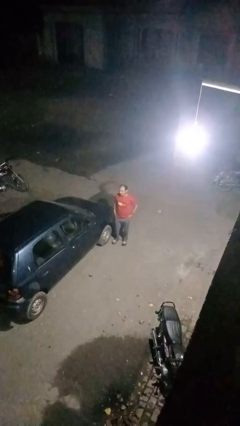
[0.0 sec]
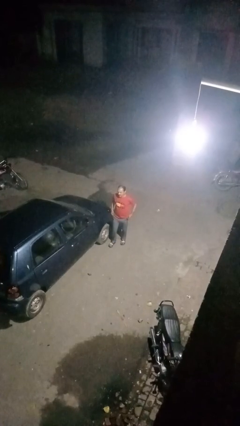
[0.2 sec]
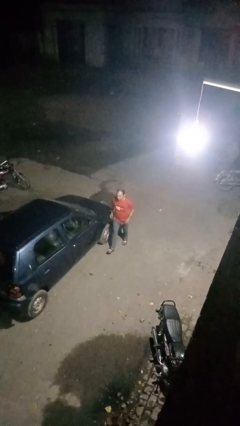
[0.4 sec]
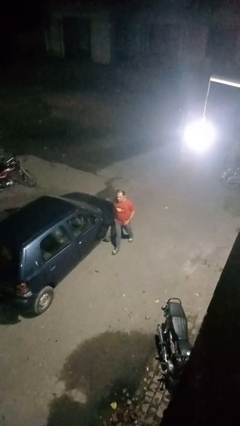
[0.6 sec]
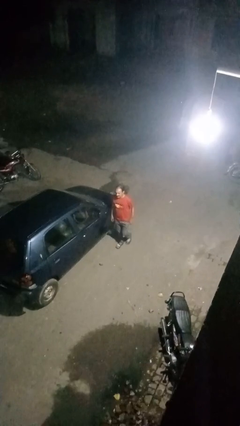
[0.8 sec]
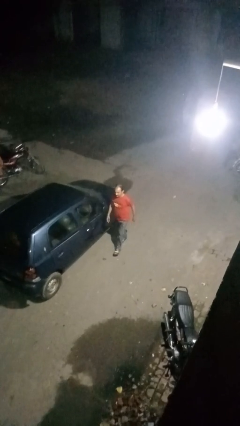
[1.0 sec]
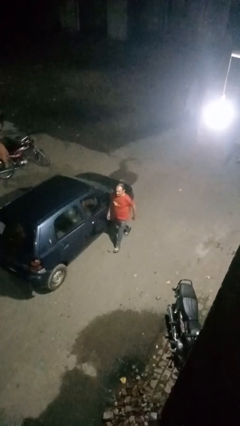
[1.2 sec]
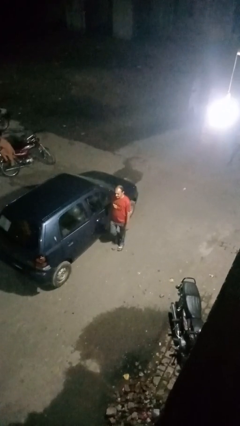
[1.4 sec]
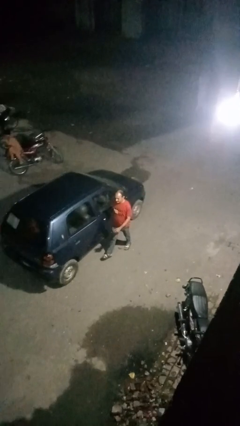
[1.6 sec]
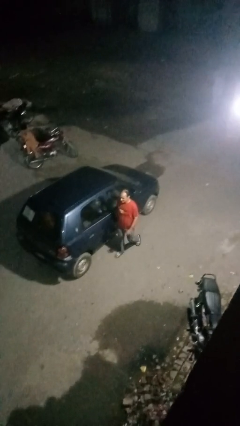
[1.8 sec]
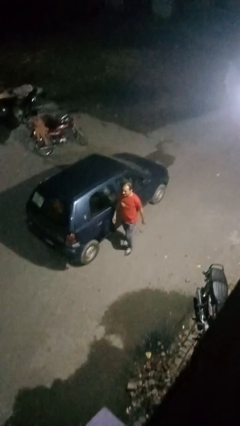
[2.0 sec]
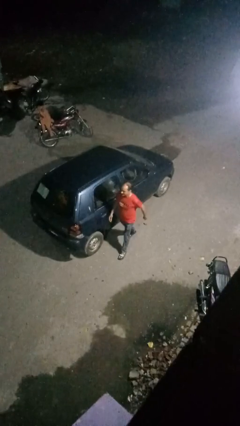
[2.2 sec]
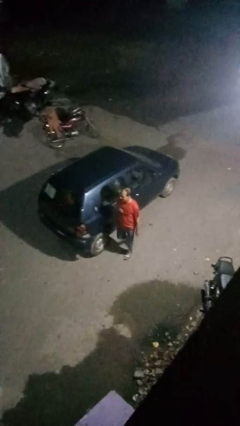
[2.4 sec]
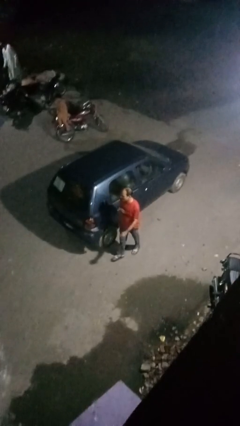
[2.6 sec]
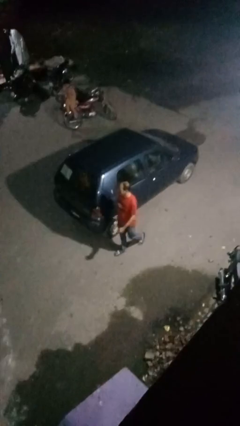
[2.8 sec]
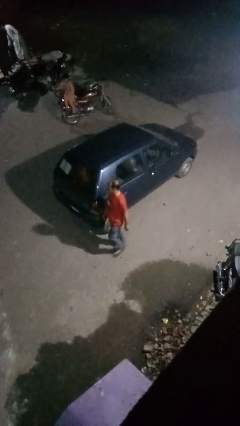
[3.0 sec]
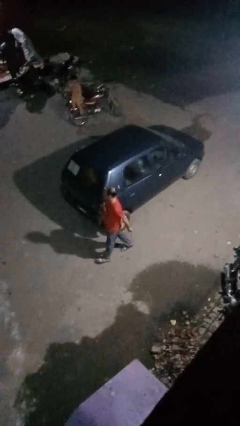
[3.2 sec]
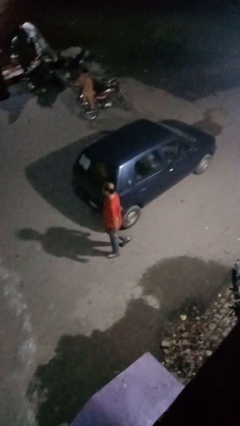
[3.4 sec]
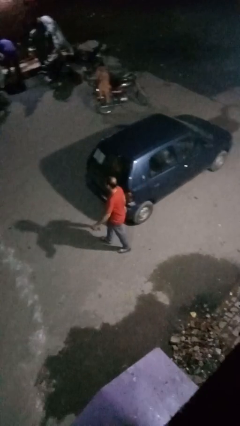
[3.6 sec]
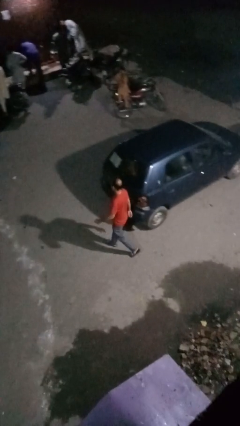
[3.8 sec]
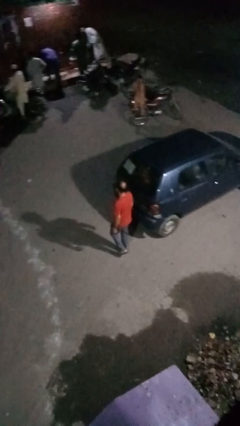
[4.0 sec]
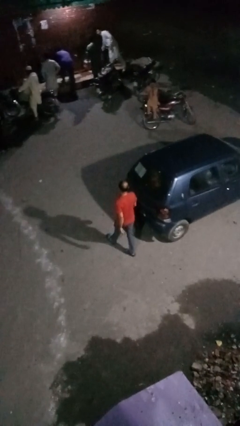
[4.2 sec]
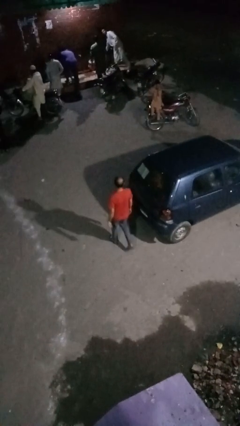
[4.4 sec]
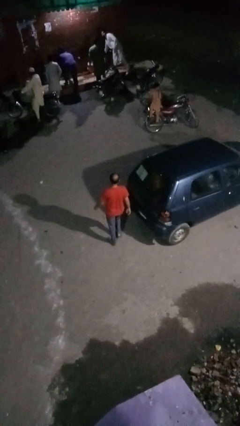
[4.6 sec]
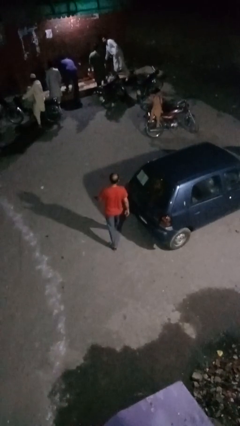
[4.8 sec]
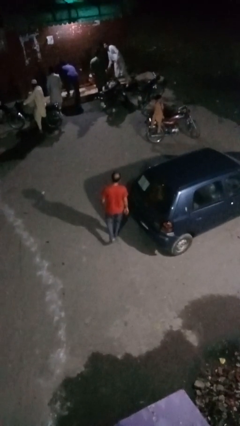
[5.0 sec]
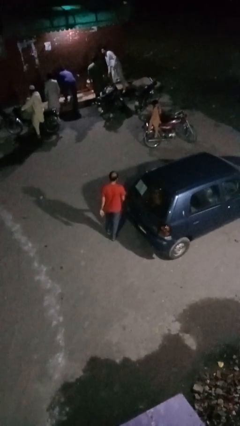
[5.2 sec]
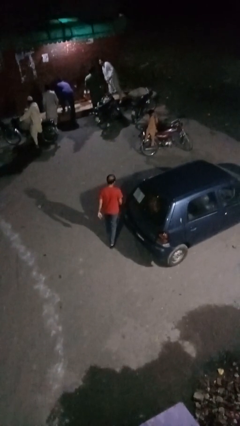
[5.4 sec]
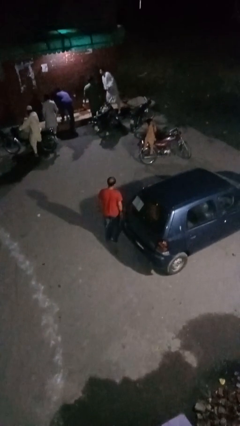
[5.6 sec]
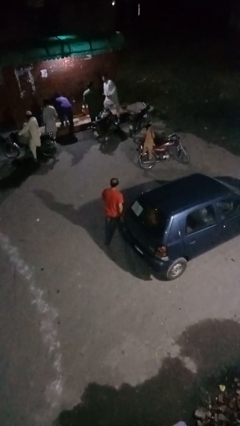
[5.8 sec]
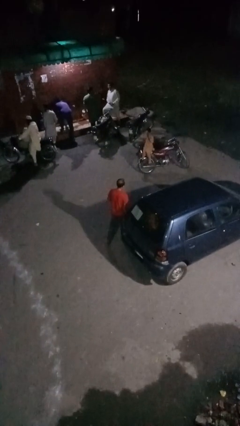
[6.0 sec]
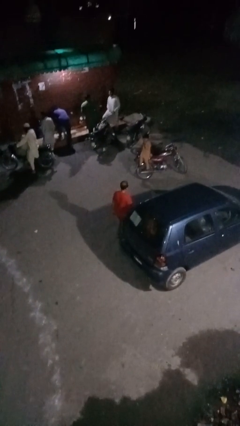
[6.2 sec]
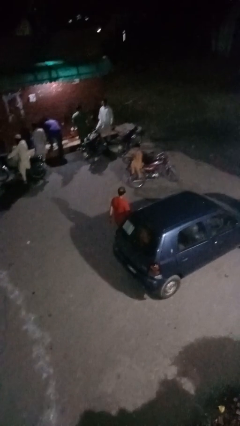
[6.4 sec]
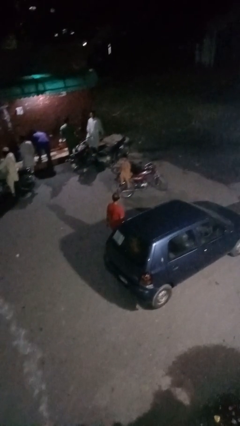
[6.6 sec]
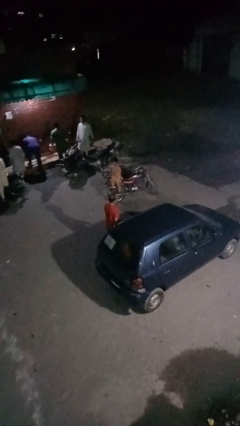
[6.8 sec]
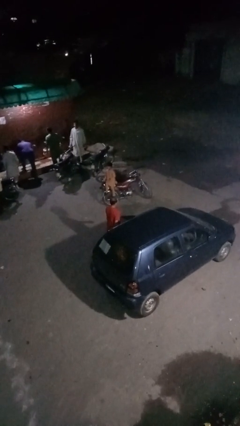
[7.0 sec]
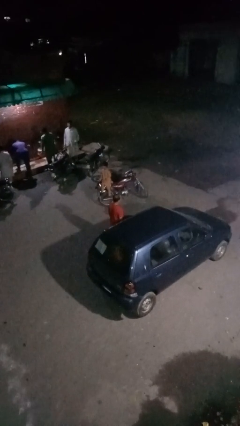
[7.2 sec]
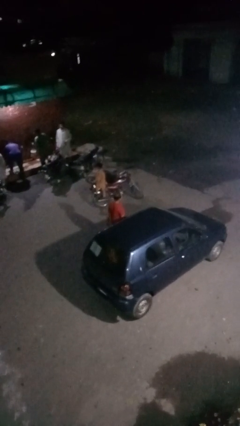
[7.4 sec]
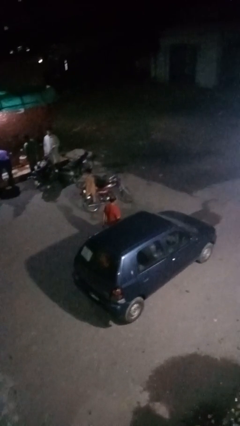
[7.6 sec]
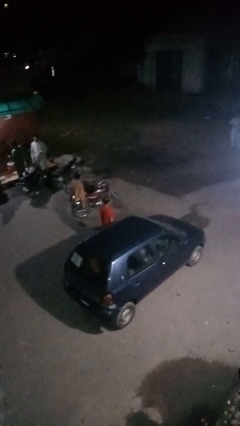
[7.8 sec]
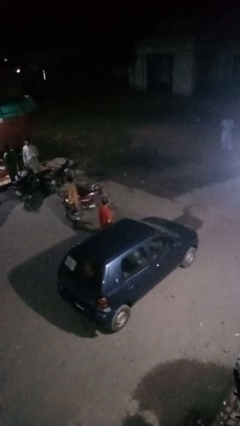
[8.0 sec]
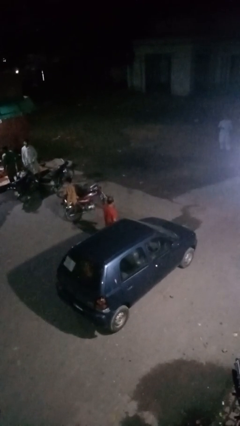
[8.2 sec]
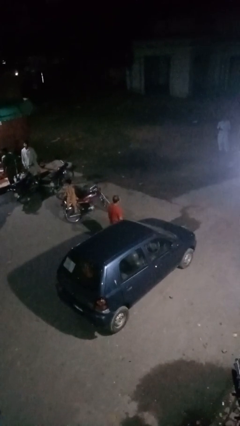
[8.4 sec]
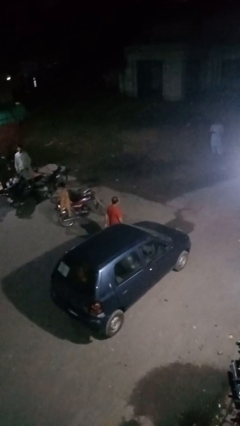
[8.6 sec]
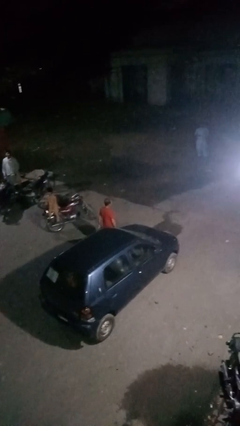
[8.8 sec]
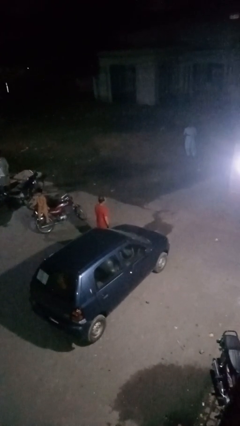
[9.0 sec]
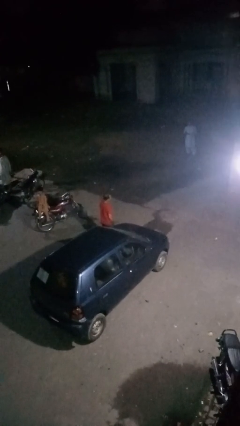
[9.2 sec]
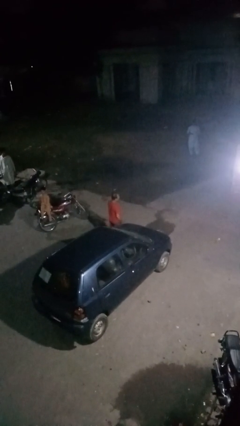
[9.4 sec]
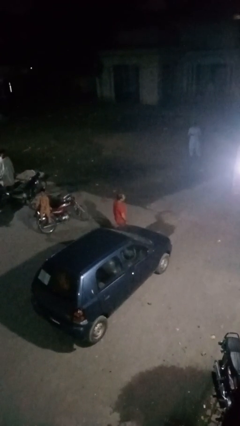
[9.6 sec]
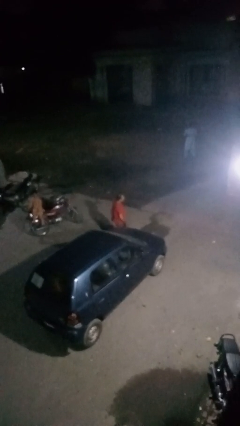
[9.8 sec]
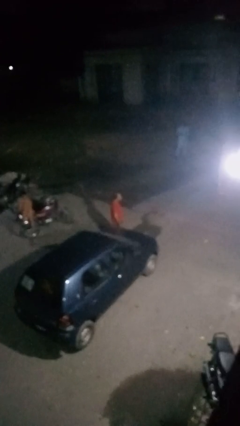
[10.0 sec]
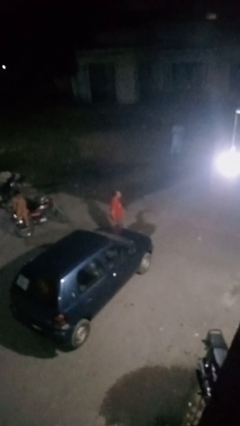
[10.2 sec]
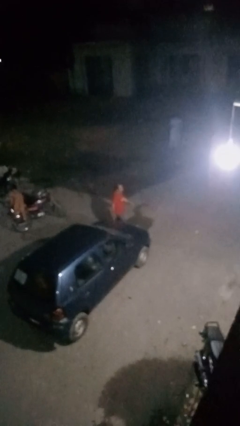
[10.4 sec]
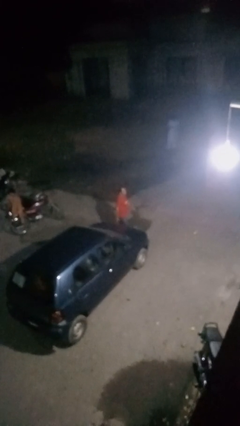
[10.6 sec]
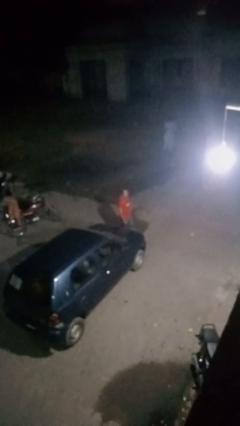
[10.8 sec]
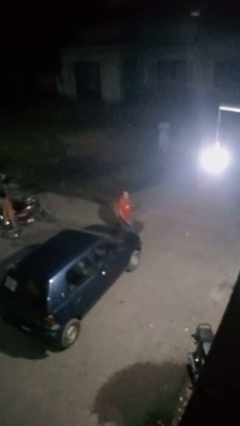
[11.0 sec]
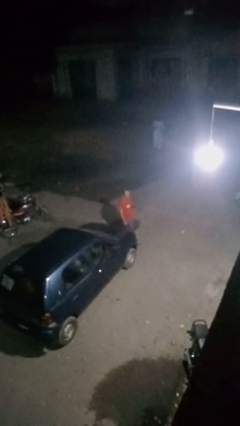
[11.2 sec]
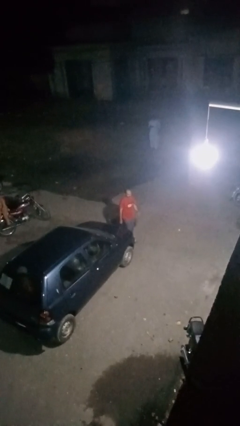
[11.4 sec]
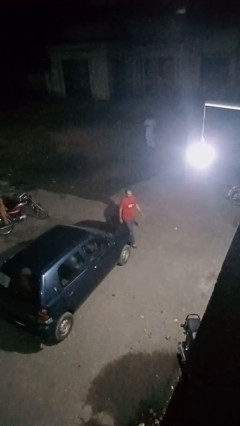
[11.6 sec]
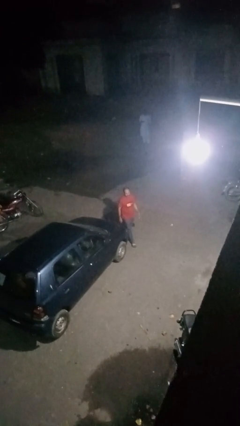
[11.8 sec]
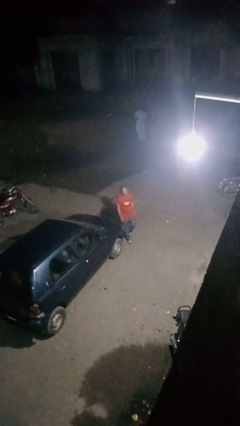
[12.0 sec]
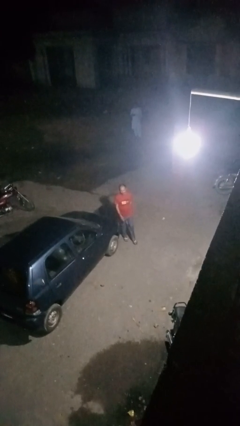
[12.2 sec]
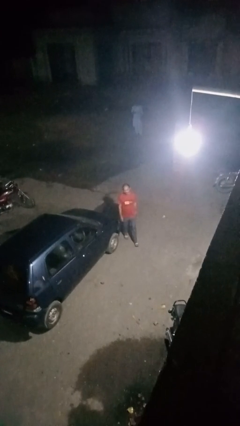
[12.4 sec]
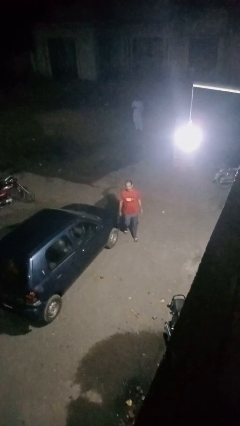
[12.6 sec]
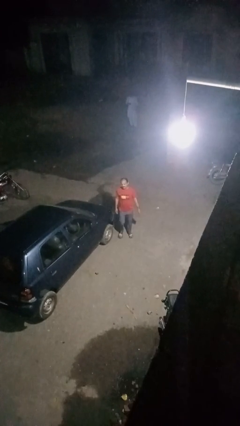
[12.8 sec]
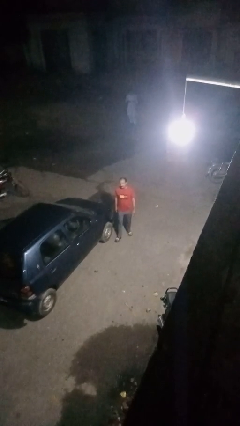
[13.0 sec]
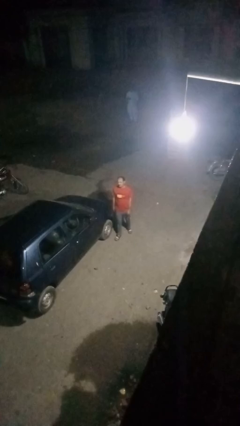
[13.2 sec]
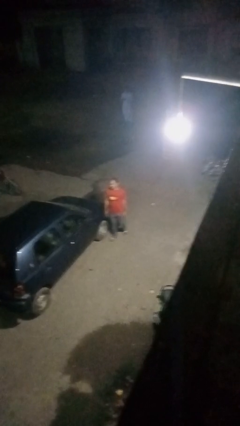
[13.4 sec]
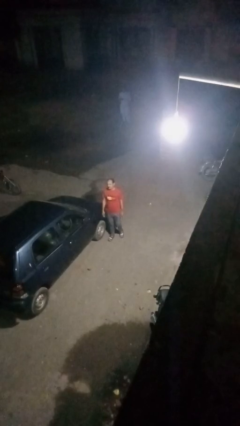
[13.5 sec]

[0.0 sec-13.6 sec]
person walks around car

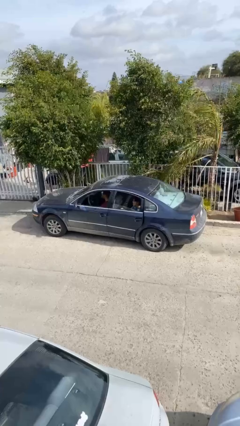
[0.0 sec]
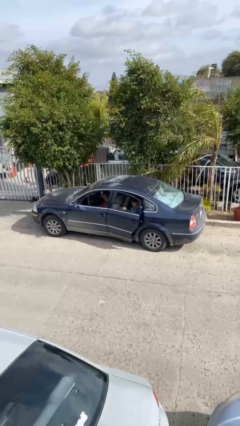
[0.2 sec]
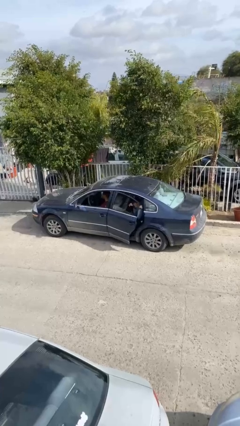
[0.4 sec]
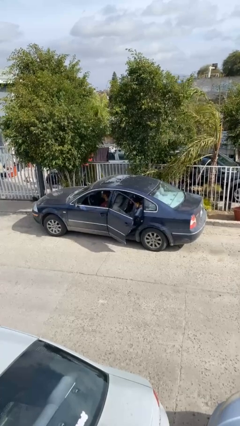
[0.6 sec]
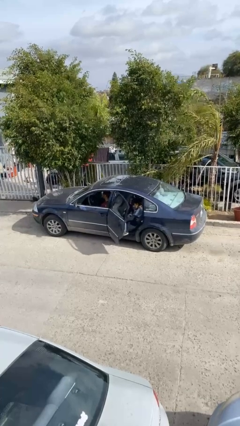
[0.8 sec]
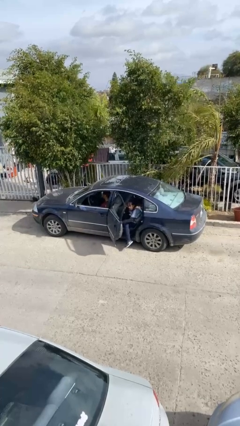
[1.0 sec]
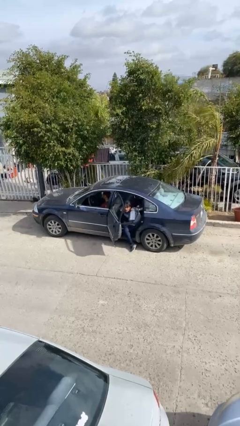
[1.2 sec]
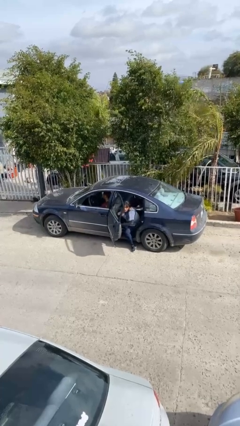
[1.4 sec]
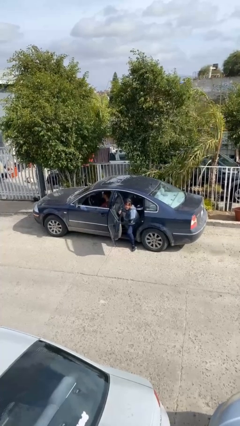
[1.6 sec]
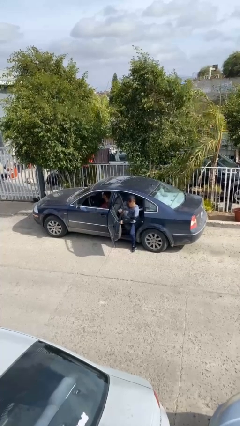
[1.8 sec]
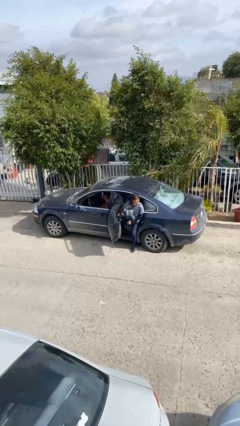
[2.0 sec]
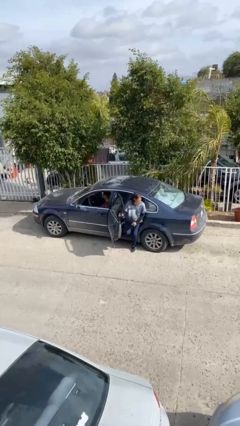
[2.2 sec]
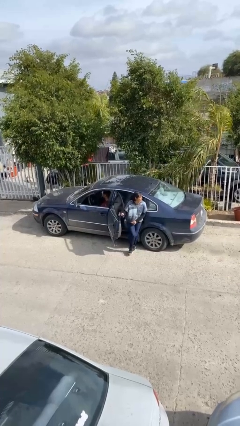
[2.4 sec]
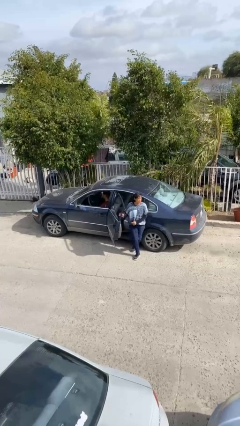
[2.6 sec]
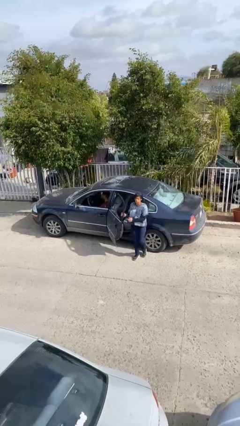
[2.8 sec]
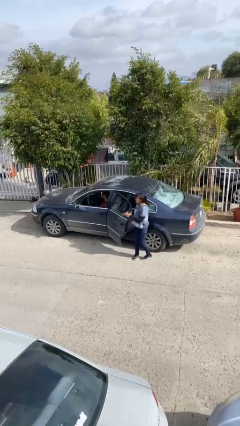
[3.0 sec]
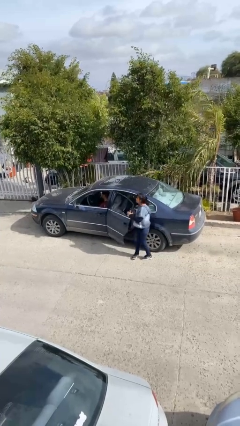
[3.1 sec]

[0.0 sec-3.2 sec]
car drops off person

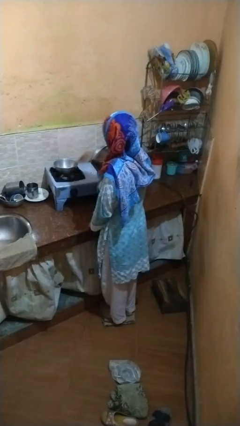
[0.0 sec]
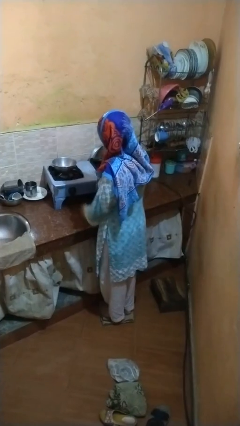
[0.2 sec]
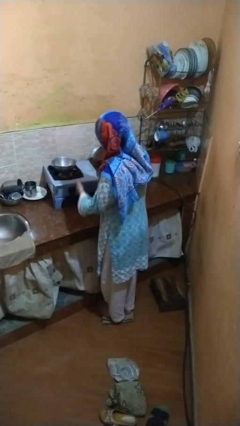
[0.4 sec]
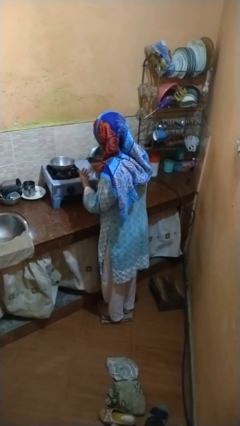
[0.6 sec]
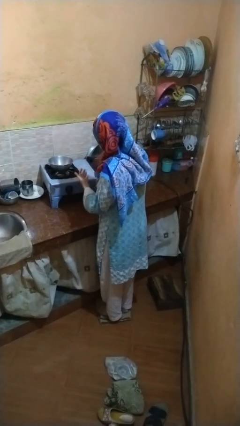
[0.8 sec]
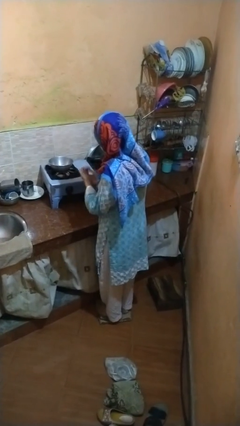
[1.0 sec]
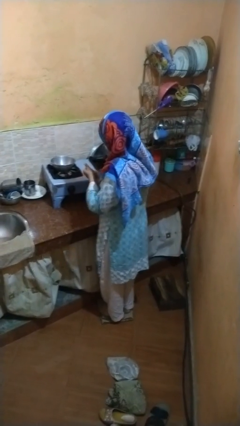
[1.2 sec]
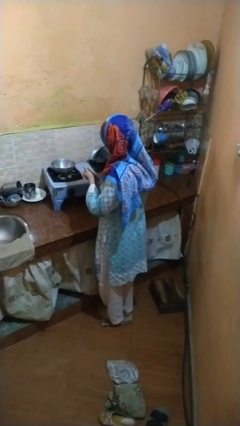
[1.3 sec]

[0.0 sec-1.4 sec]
person burns hand
